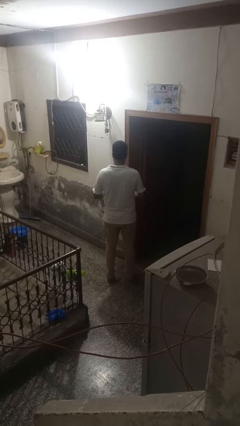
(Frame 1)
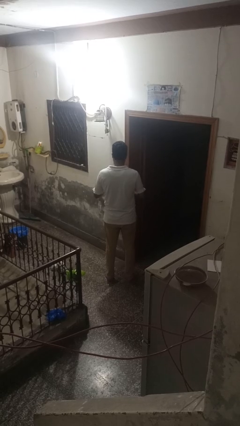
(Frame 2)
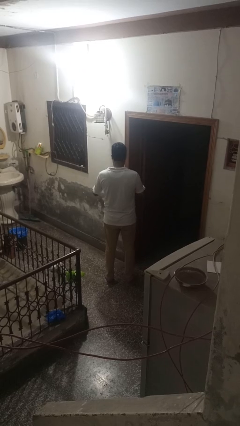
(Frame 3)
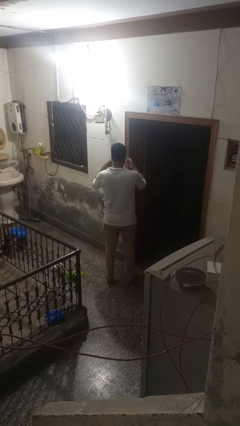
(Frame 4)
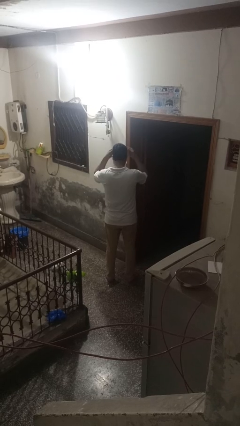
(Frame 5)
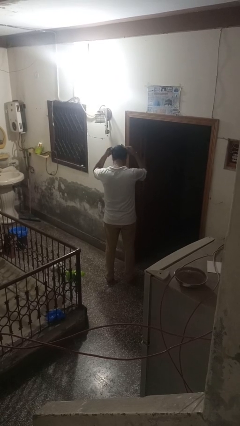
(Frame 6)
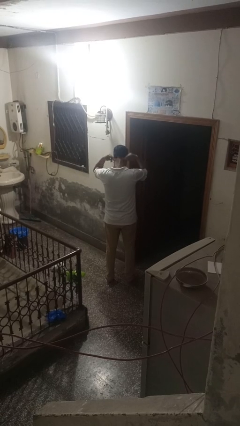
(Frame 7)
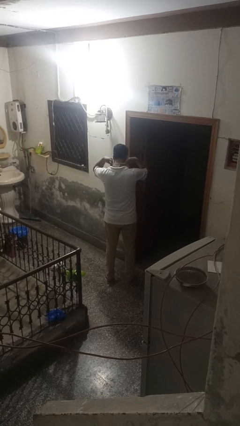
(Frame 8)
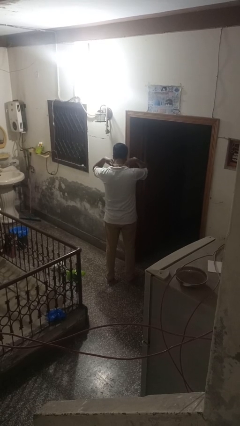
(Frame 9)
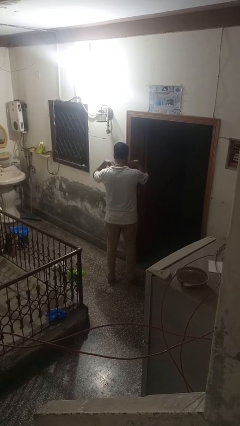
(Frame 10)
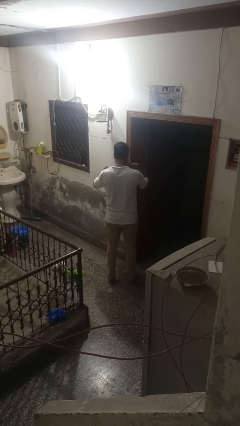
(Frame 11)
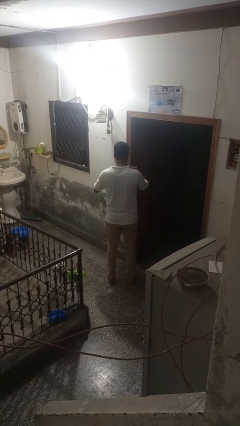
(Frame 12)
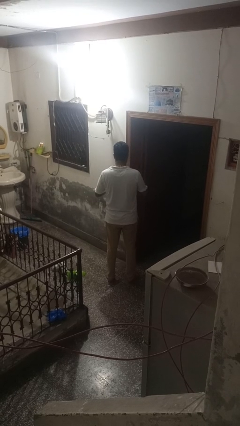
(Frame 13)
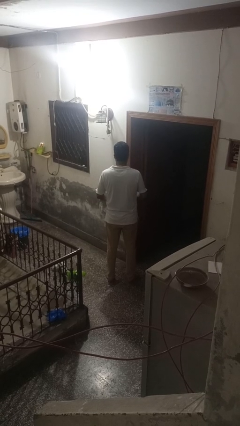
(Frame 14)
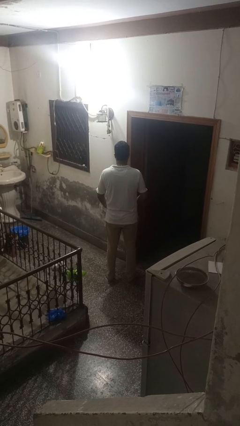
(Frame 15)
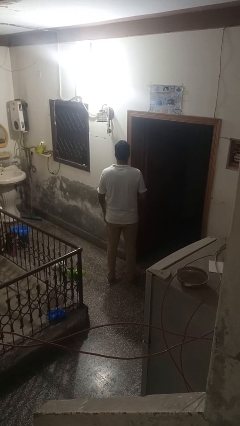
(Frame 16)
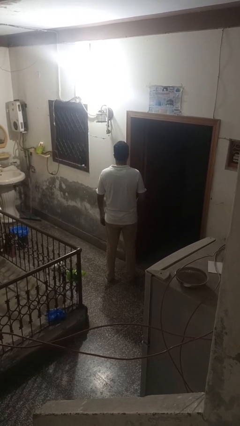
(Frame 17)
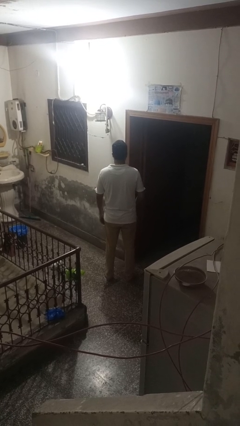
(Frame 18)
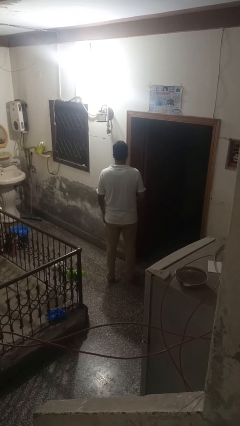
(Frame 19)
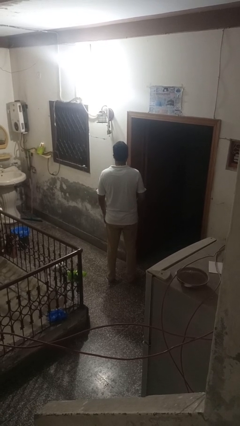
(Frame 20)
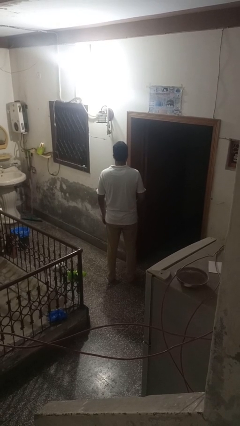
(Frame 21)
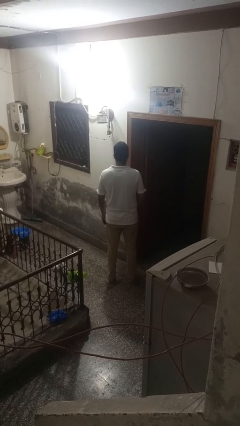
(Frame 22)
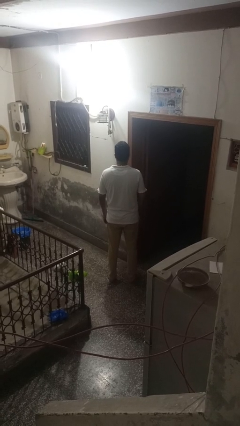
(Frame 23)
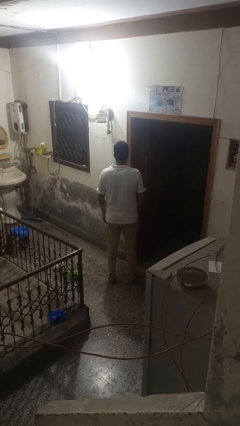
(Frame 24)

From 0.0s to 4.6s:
person puts on necklace

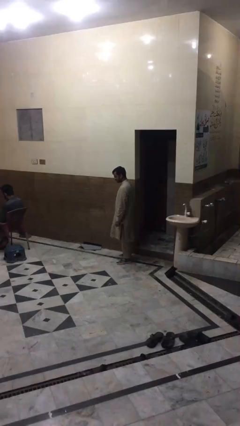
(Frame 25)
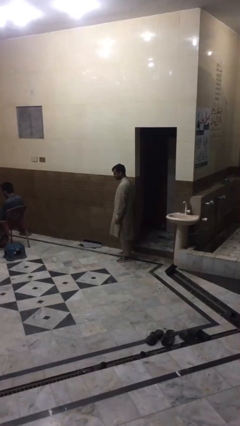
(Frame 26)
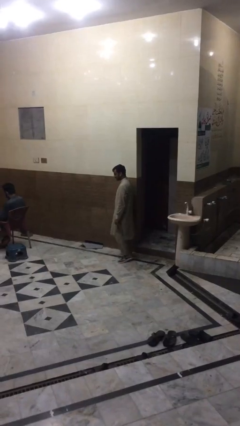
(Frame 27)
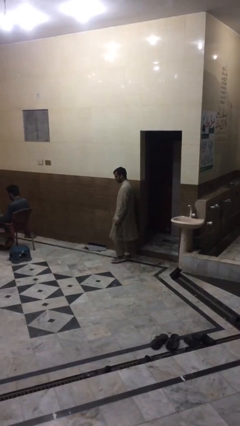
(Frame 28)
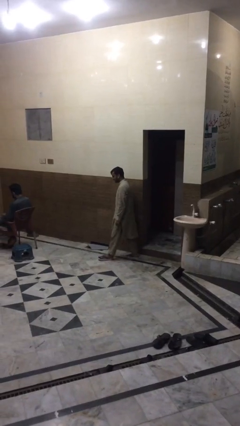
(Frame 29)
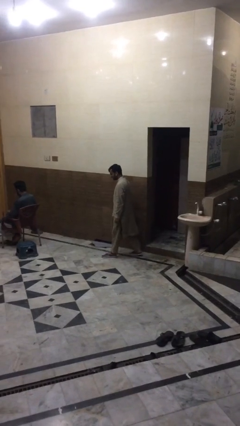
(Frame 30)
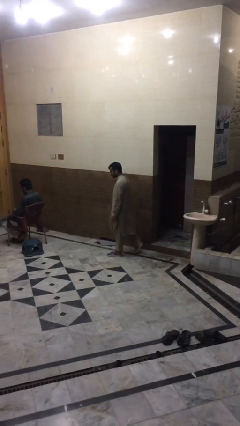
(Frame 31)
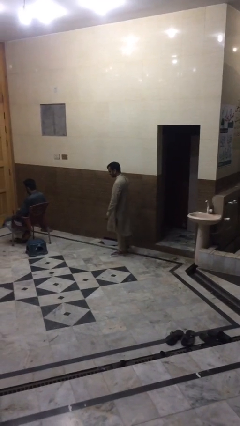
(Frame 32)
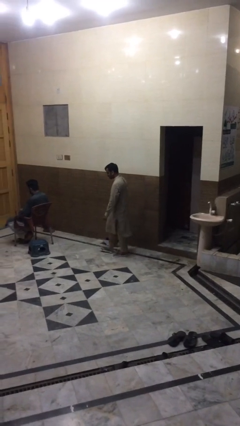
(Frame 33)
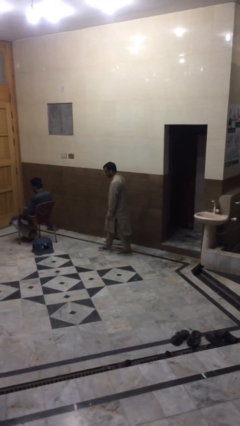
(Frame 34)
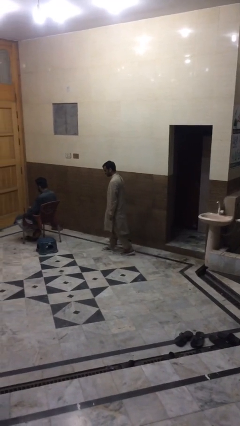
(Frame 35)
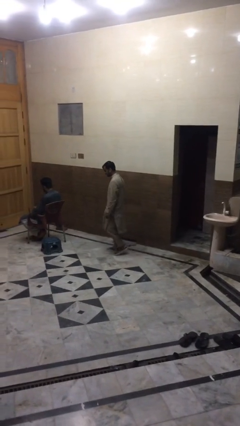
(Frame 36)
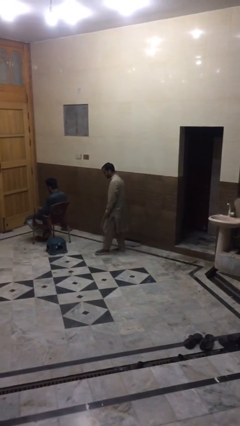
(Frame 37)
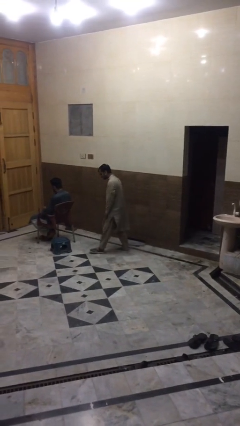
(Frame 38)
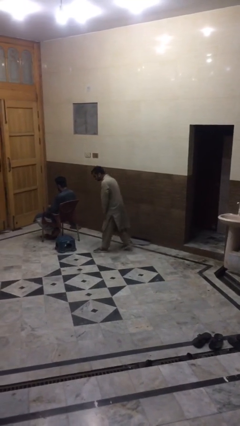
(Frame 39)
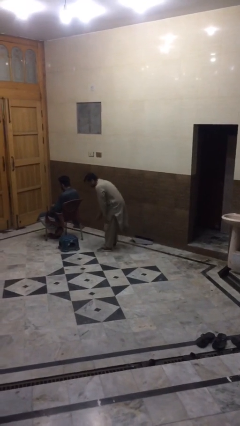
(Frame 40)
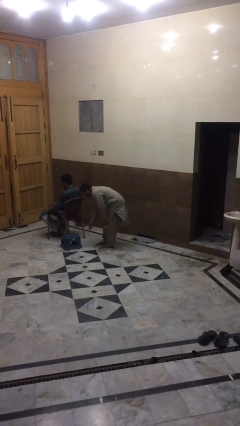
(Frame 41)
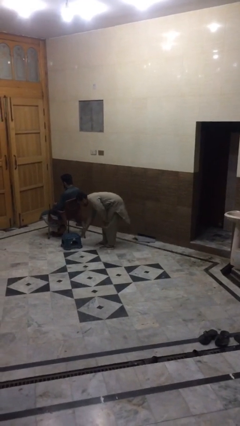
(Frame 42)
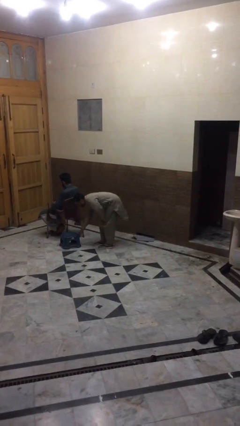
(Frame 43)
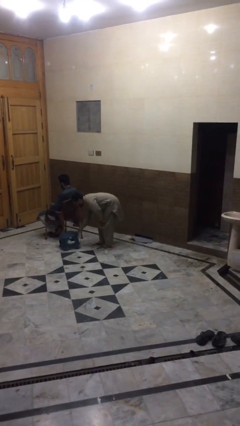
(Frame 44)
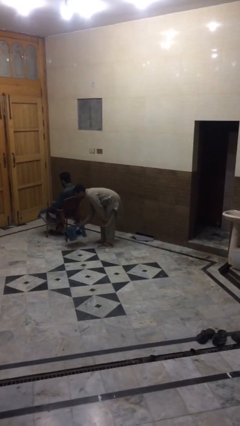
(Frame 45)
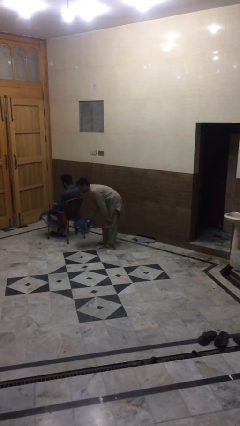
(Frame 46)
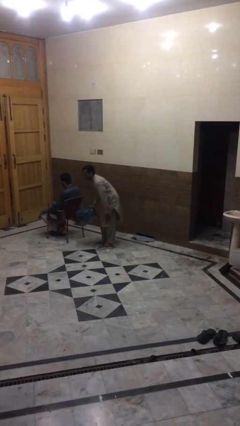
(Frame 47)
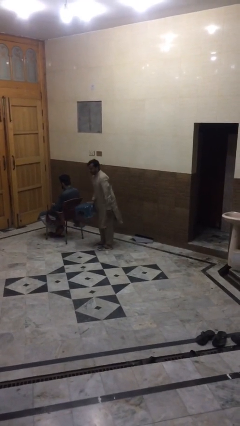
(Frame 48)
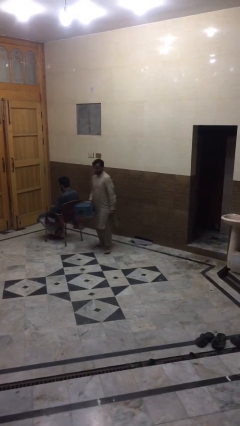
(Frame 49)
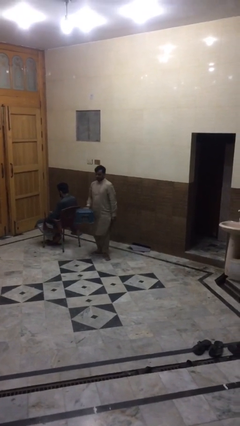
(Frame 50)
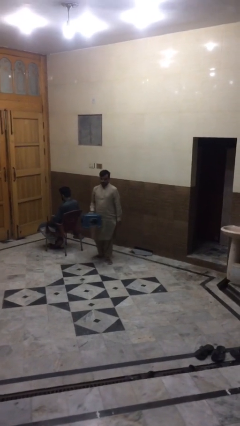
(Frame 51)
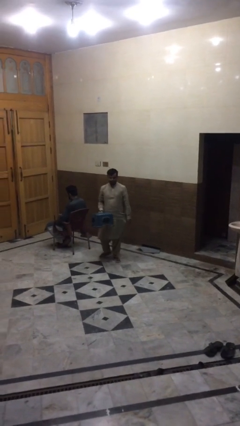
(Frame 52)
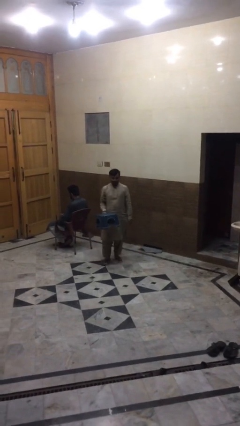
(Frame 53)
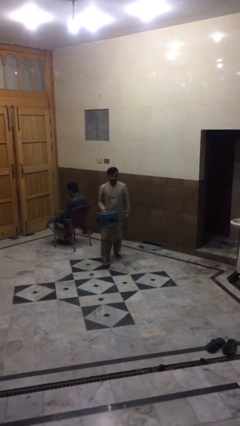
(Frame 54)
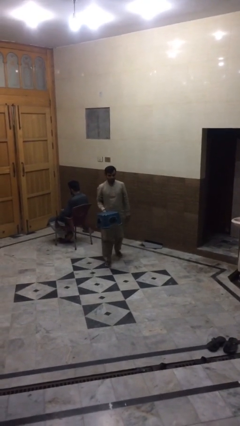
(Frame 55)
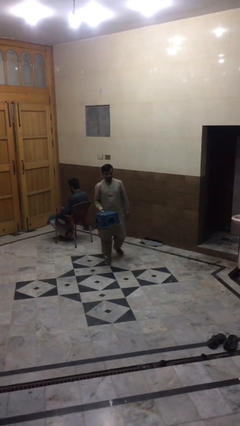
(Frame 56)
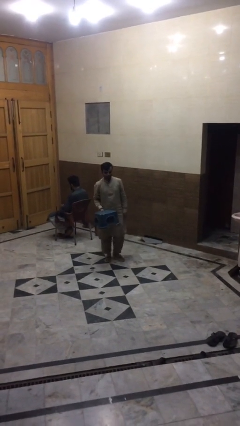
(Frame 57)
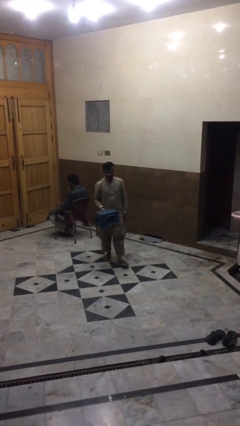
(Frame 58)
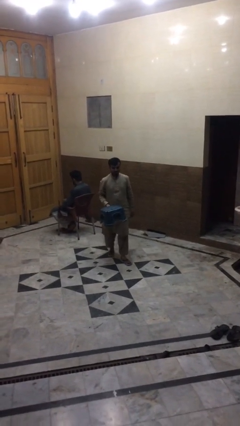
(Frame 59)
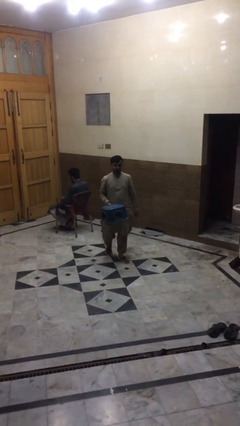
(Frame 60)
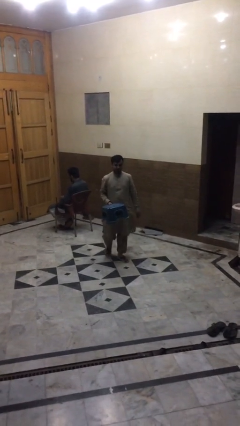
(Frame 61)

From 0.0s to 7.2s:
person steals object from person

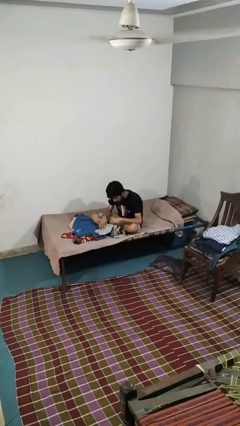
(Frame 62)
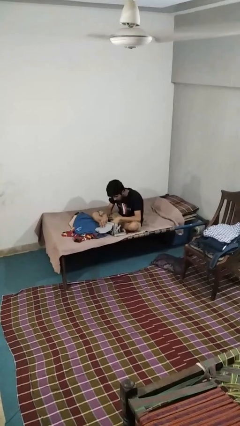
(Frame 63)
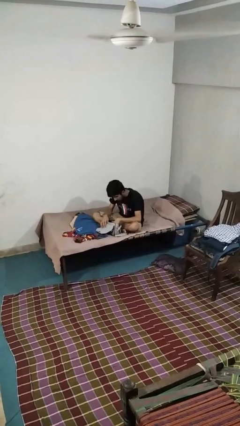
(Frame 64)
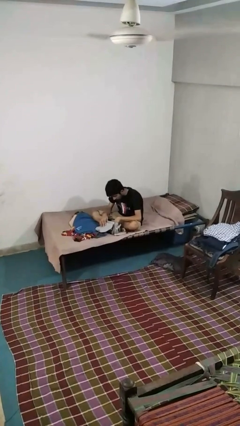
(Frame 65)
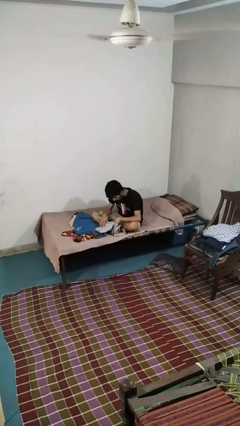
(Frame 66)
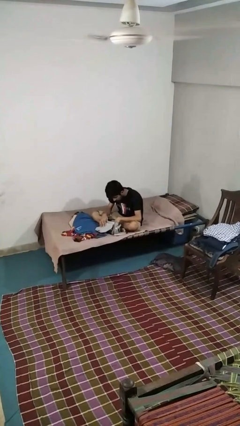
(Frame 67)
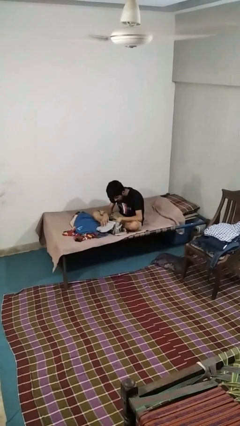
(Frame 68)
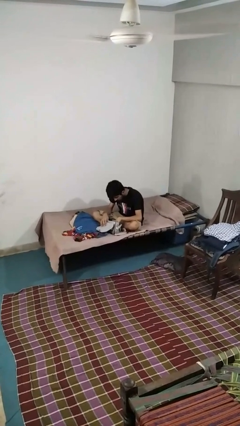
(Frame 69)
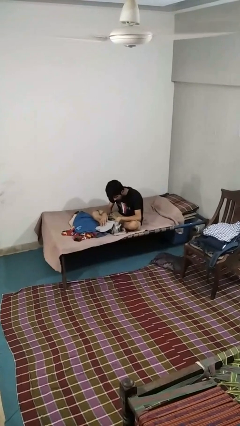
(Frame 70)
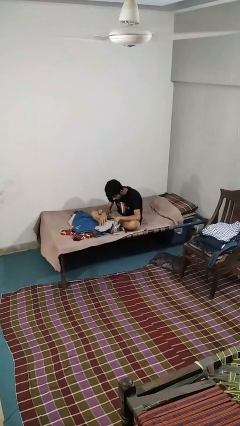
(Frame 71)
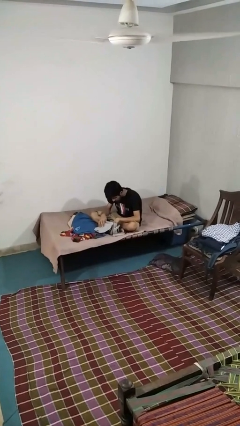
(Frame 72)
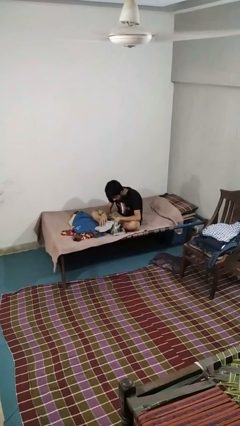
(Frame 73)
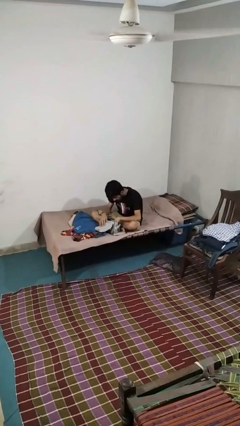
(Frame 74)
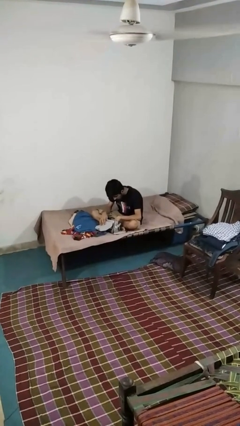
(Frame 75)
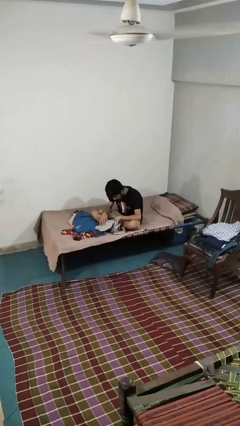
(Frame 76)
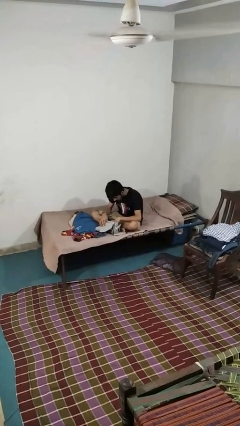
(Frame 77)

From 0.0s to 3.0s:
person searches in purse

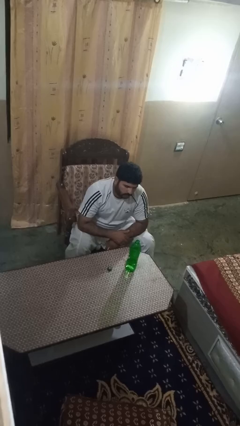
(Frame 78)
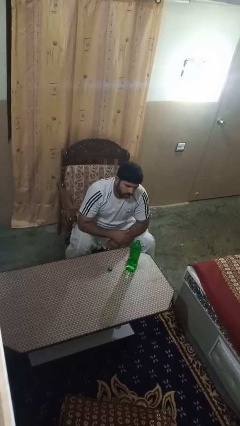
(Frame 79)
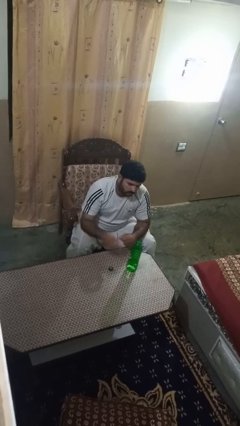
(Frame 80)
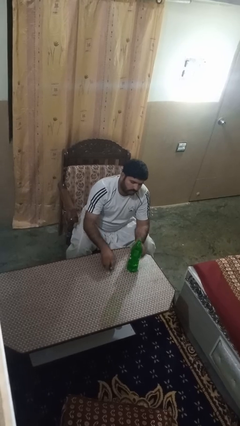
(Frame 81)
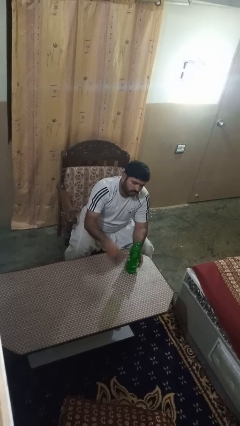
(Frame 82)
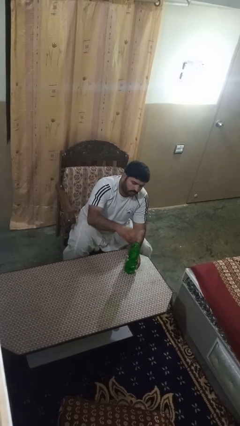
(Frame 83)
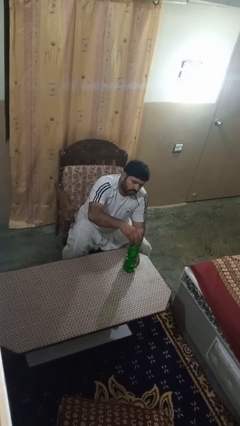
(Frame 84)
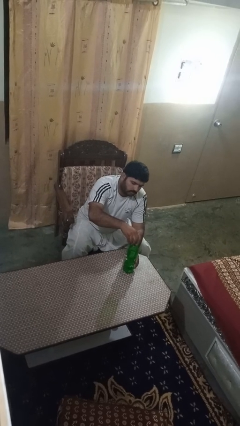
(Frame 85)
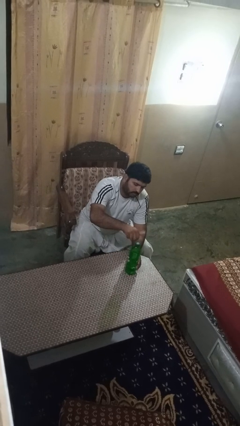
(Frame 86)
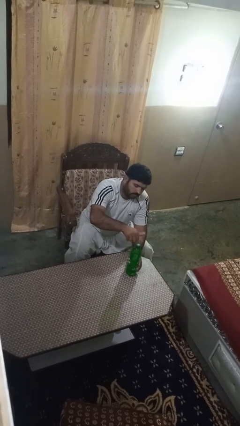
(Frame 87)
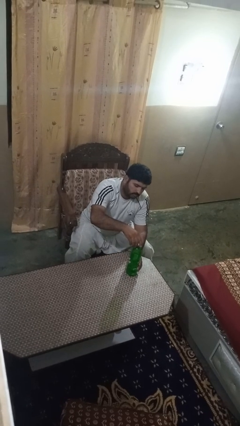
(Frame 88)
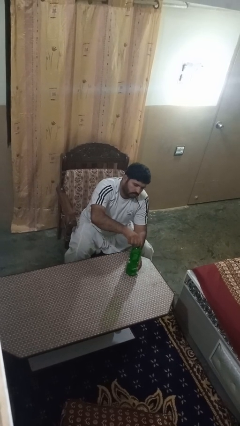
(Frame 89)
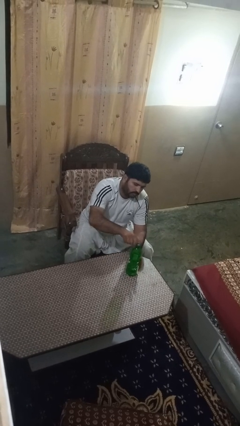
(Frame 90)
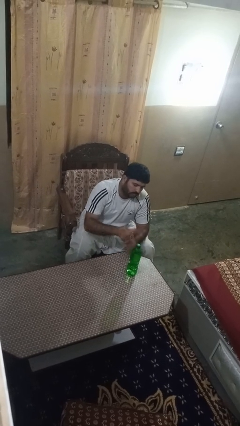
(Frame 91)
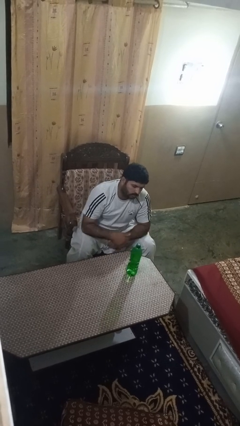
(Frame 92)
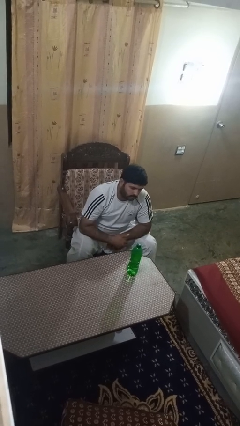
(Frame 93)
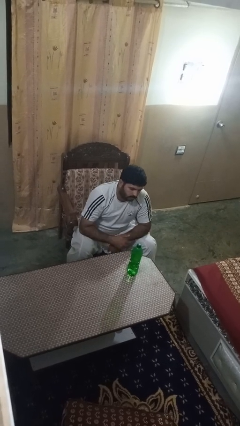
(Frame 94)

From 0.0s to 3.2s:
person screws lid to bottle
